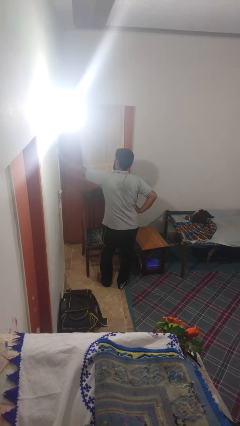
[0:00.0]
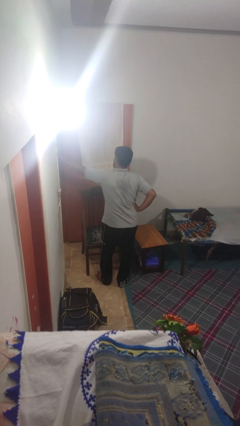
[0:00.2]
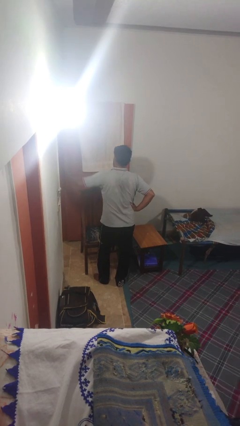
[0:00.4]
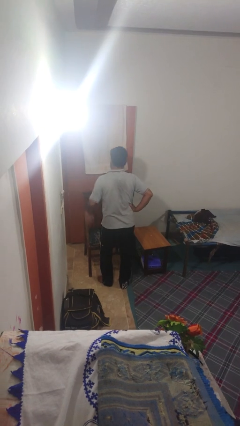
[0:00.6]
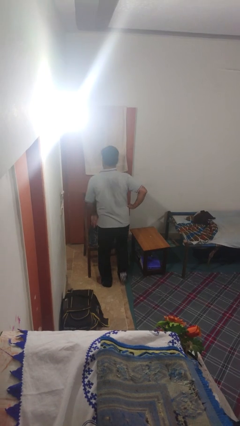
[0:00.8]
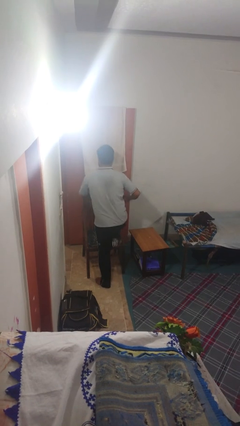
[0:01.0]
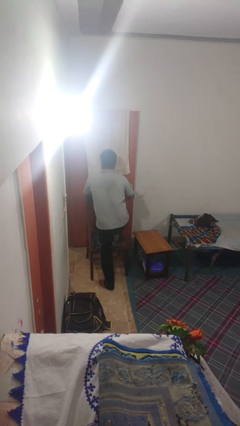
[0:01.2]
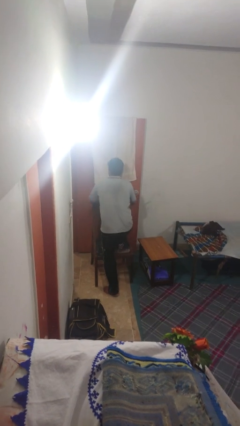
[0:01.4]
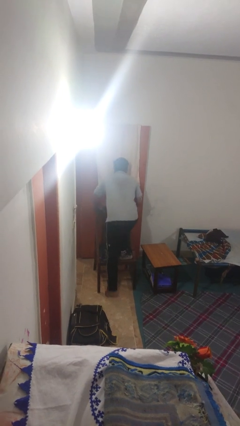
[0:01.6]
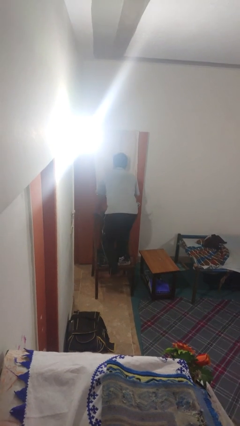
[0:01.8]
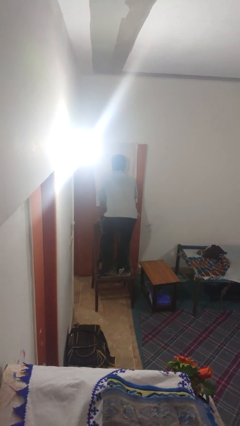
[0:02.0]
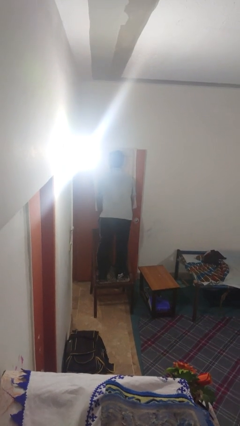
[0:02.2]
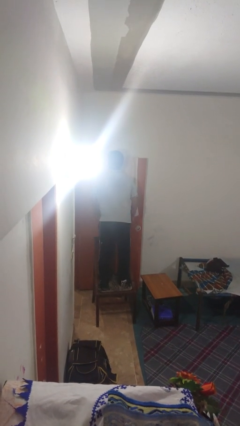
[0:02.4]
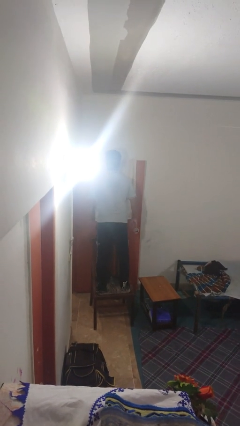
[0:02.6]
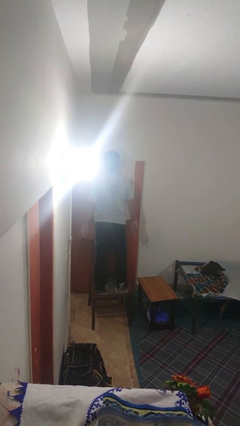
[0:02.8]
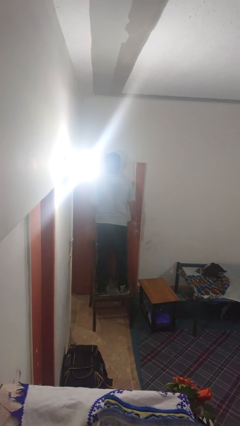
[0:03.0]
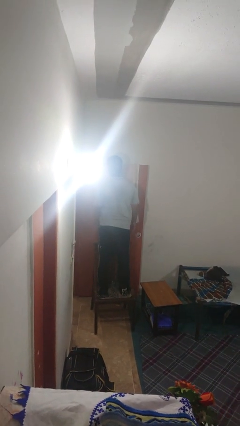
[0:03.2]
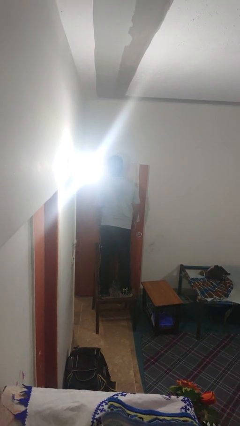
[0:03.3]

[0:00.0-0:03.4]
person climbs on chair

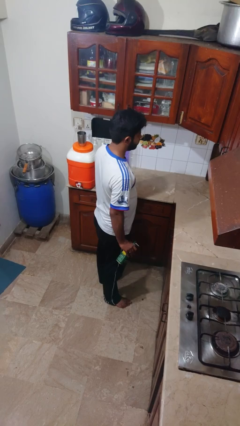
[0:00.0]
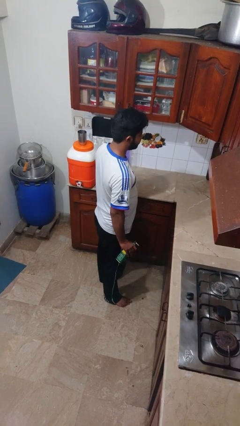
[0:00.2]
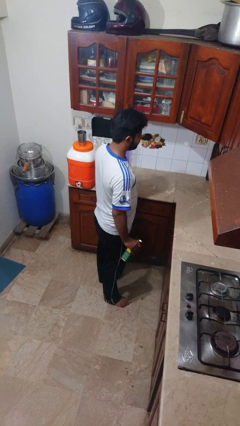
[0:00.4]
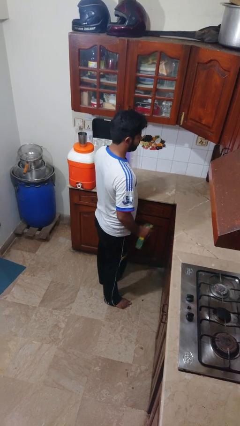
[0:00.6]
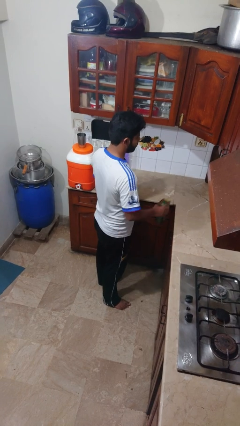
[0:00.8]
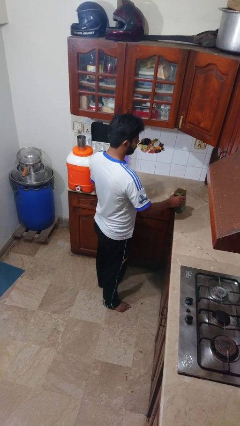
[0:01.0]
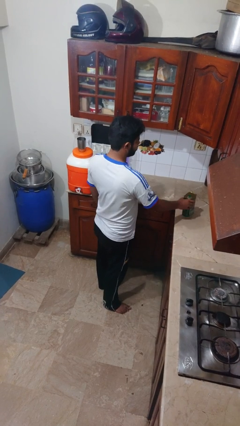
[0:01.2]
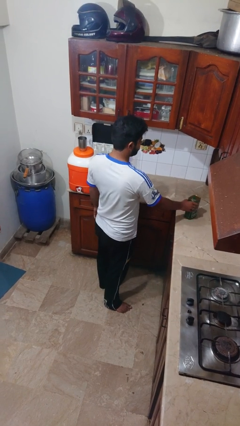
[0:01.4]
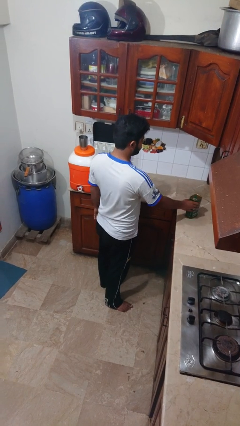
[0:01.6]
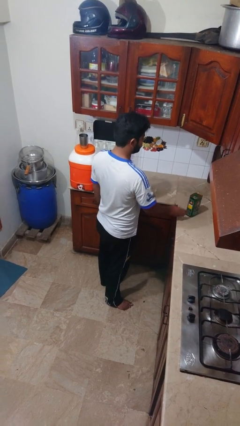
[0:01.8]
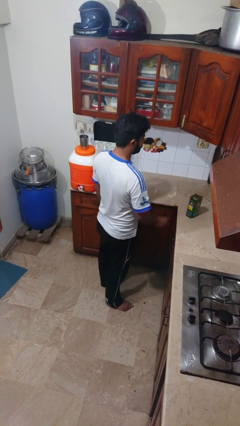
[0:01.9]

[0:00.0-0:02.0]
person puts down object on countertop

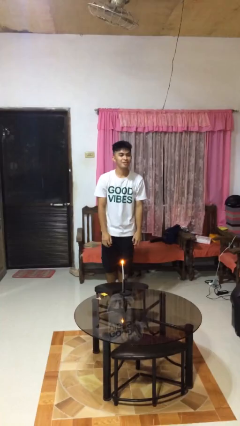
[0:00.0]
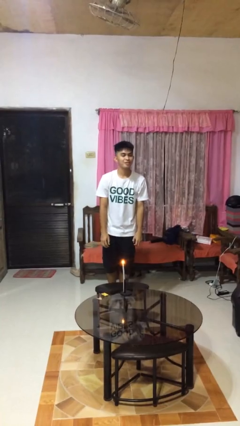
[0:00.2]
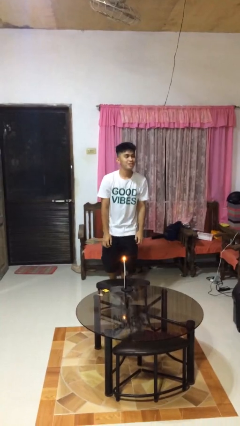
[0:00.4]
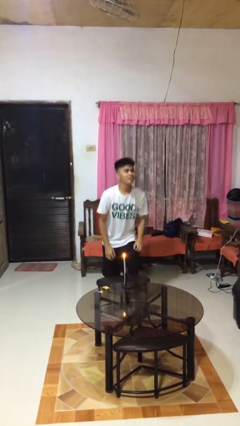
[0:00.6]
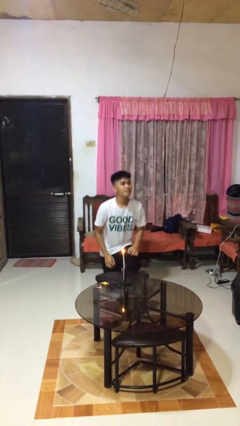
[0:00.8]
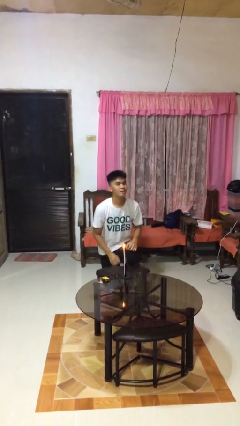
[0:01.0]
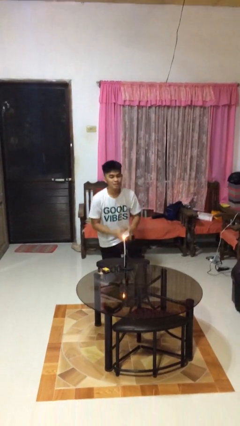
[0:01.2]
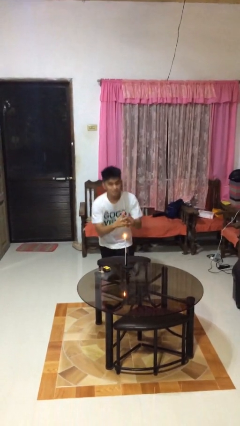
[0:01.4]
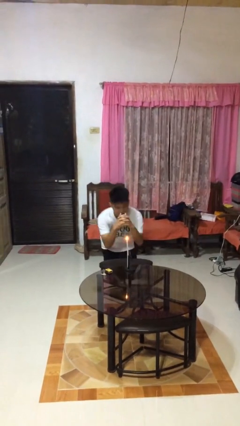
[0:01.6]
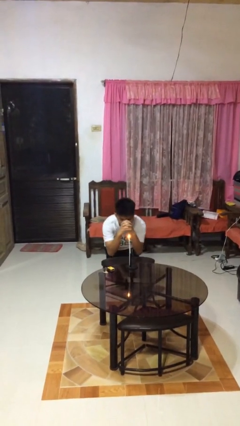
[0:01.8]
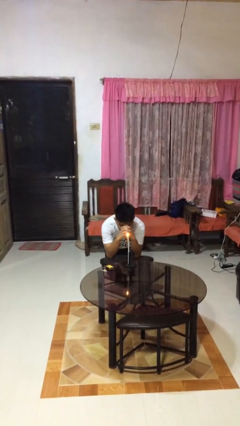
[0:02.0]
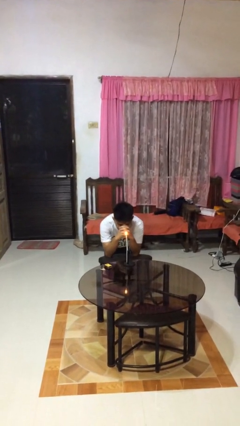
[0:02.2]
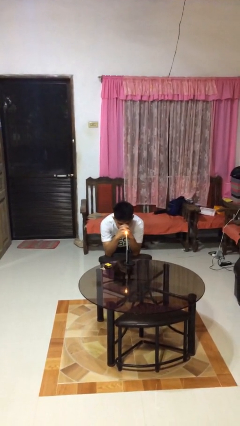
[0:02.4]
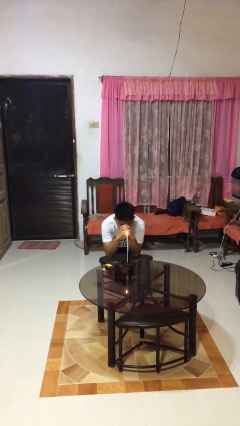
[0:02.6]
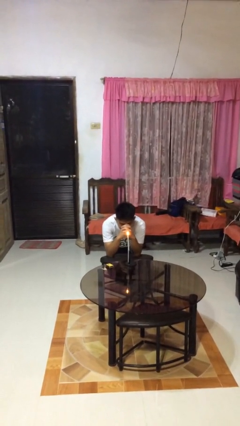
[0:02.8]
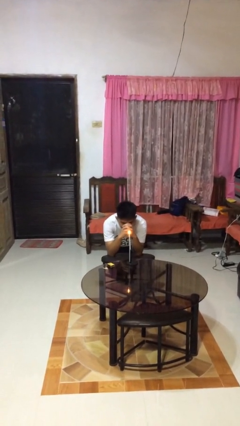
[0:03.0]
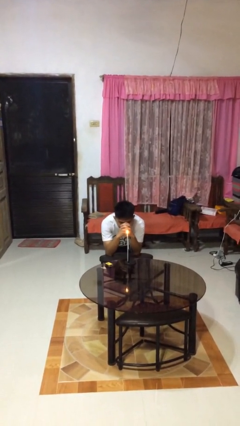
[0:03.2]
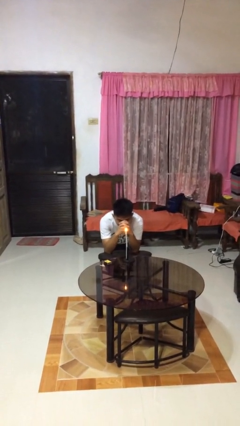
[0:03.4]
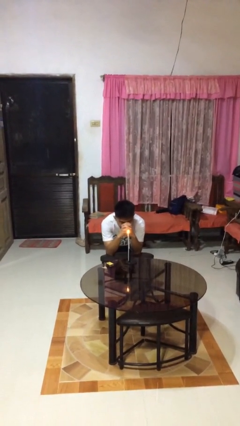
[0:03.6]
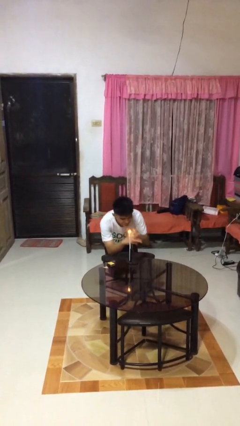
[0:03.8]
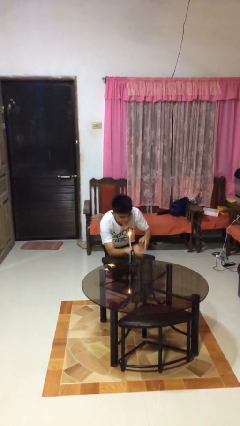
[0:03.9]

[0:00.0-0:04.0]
person prays

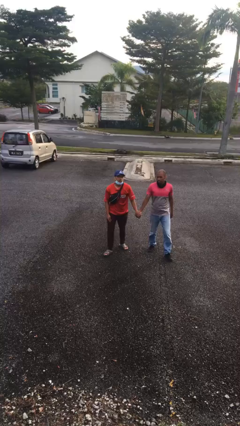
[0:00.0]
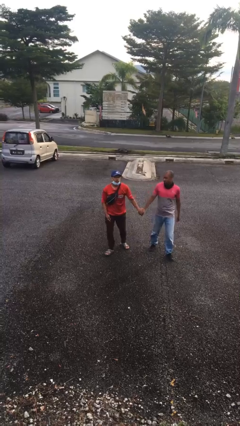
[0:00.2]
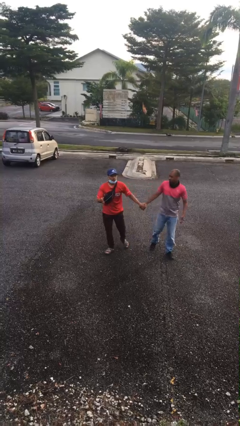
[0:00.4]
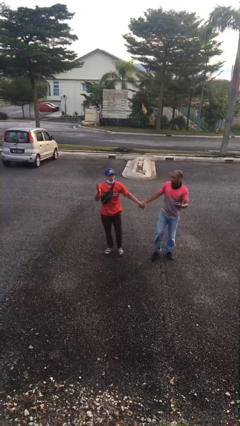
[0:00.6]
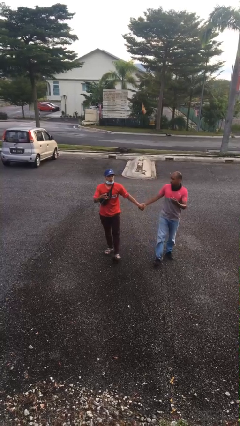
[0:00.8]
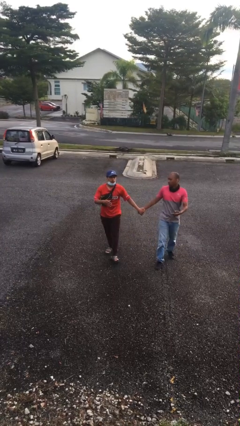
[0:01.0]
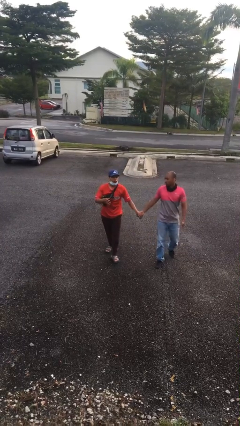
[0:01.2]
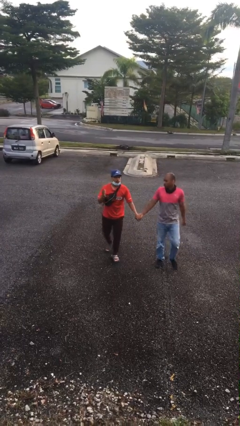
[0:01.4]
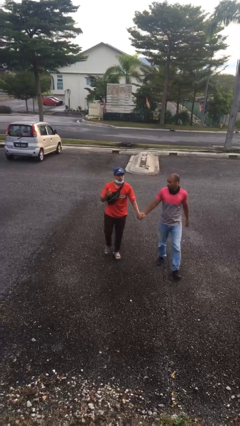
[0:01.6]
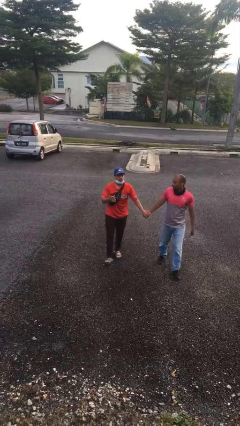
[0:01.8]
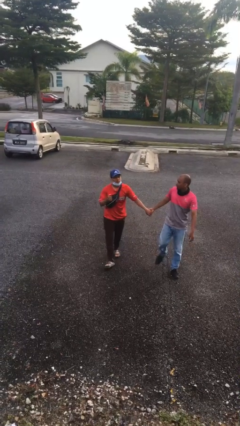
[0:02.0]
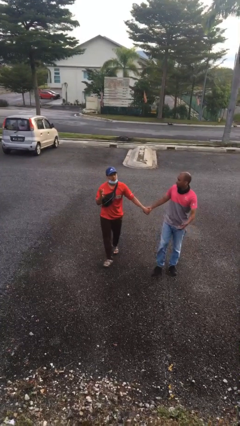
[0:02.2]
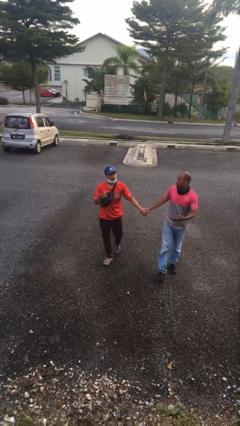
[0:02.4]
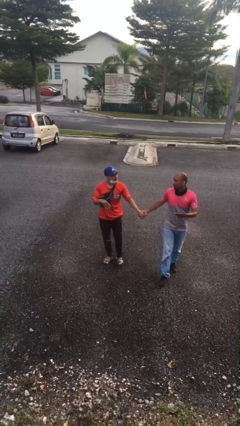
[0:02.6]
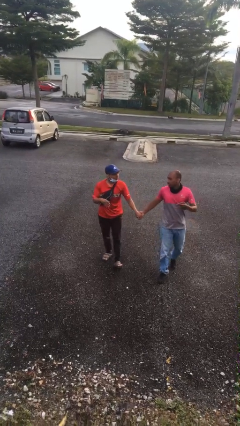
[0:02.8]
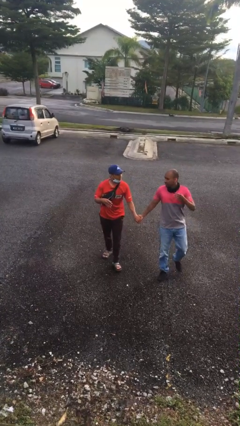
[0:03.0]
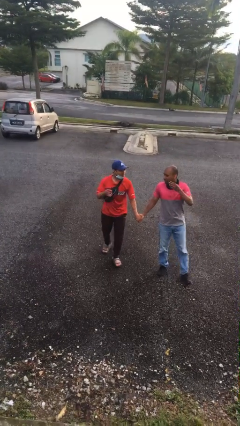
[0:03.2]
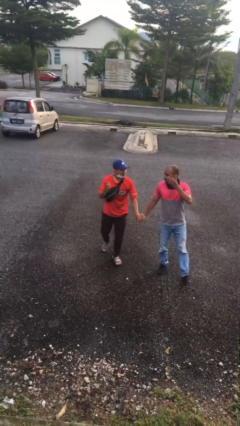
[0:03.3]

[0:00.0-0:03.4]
person holds hand

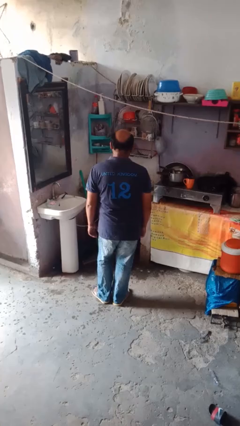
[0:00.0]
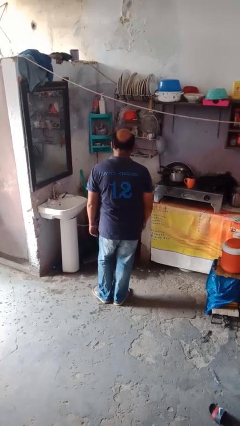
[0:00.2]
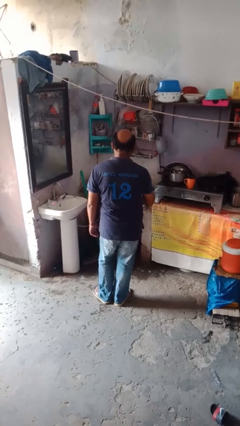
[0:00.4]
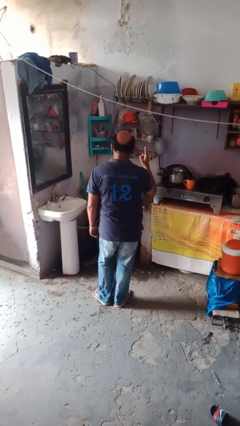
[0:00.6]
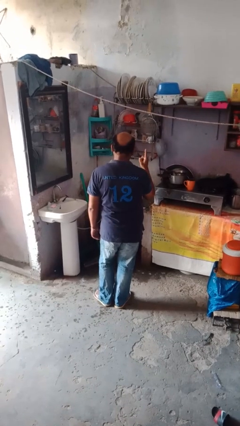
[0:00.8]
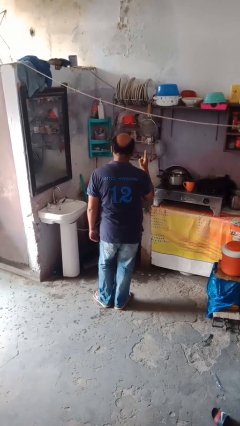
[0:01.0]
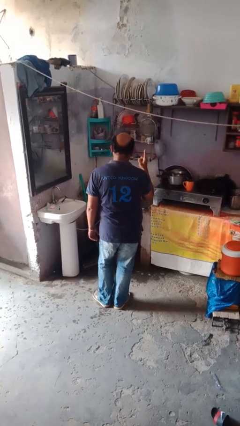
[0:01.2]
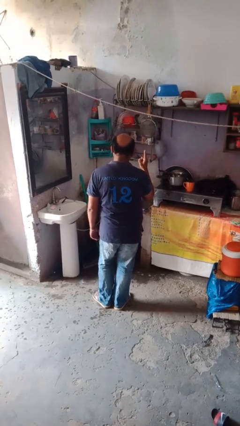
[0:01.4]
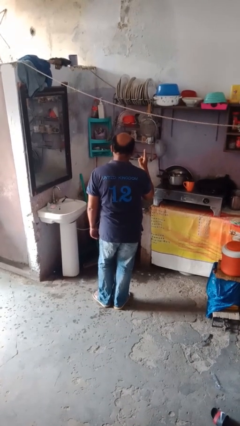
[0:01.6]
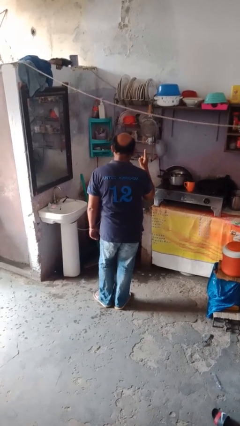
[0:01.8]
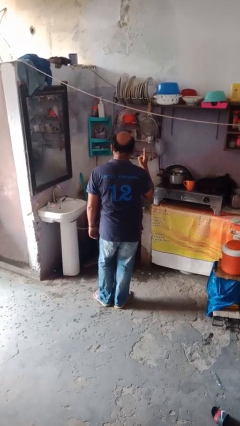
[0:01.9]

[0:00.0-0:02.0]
person gestures number one

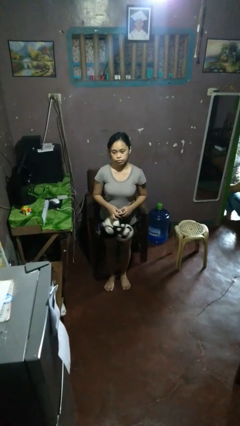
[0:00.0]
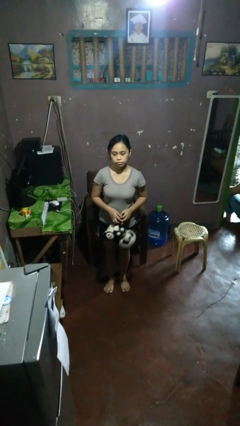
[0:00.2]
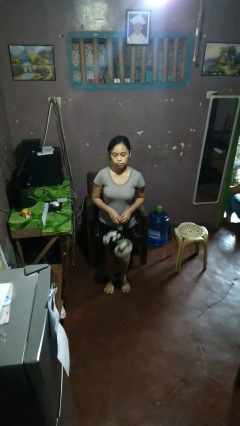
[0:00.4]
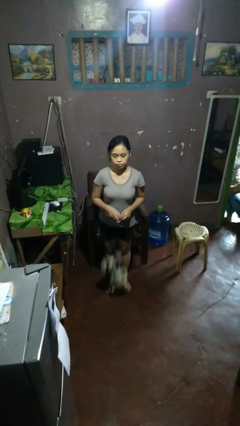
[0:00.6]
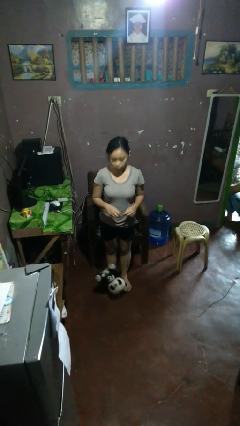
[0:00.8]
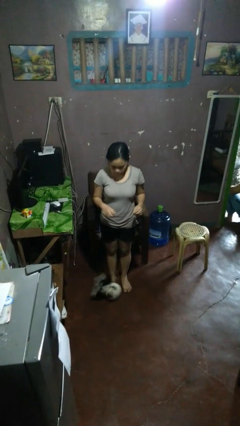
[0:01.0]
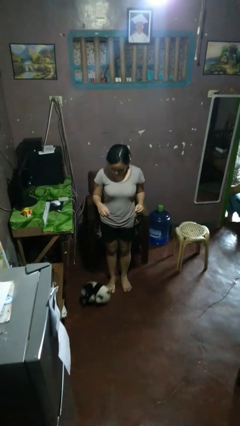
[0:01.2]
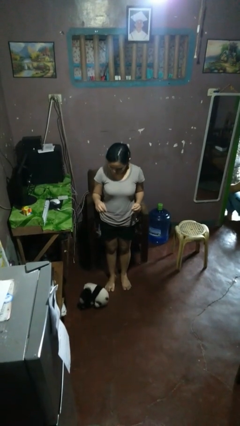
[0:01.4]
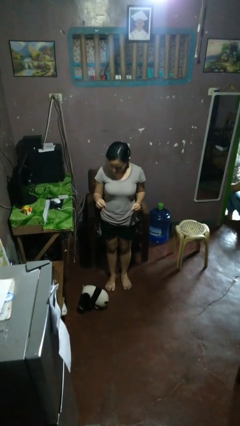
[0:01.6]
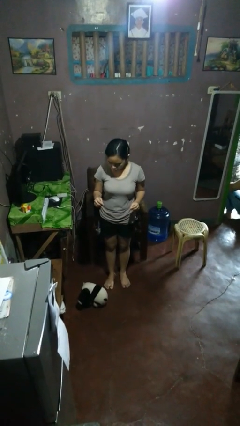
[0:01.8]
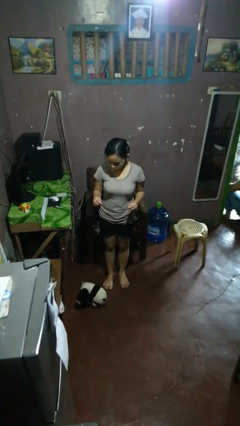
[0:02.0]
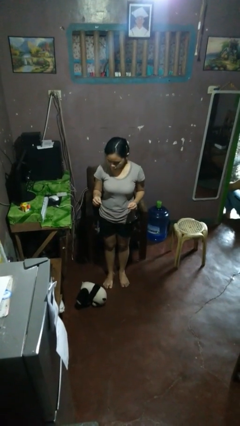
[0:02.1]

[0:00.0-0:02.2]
person drops object

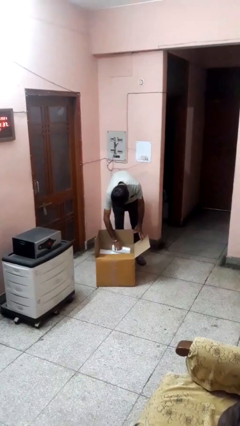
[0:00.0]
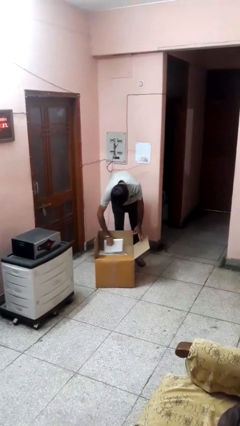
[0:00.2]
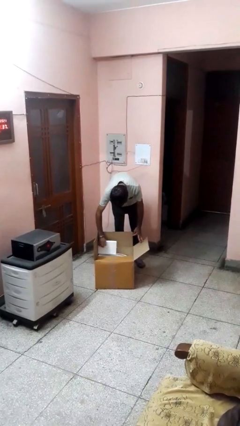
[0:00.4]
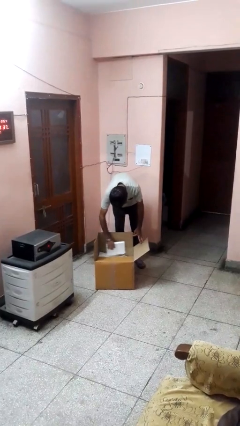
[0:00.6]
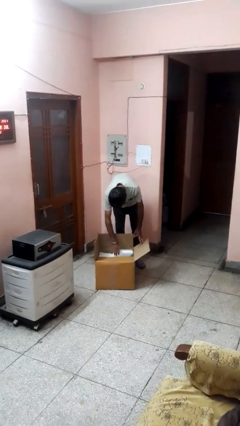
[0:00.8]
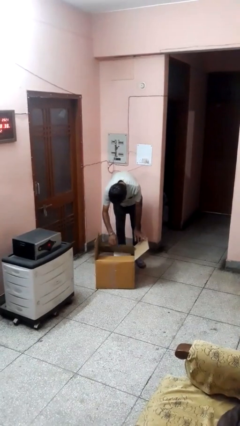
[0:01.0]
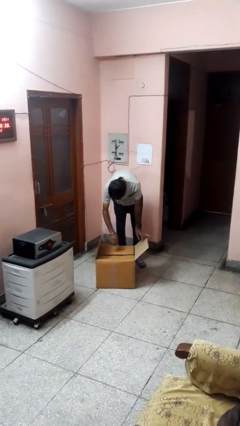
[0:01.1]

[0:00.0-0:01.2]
person searches in box
